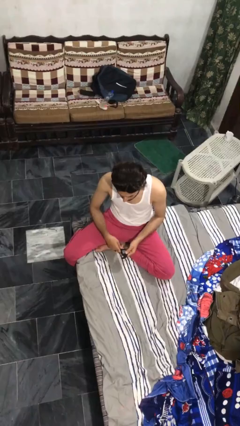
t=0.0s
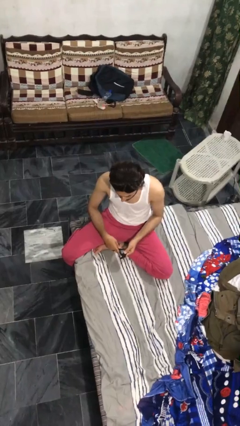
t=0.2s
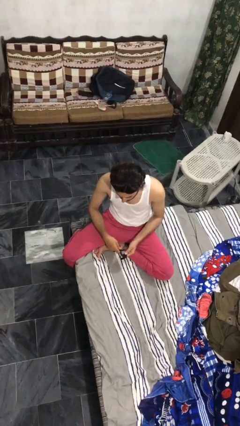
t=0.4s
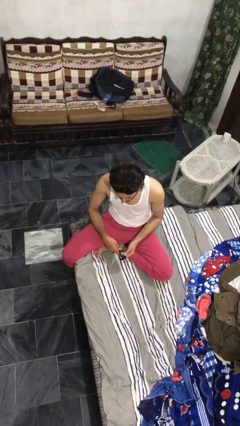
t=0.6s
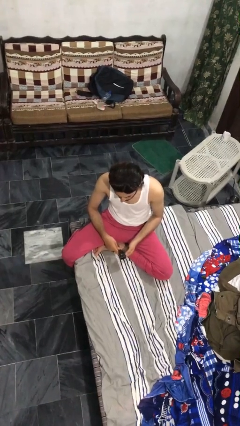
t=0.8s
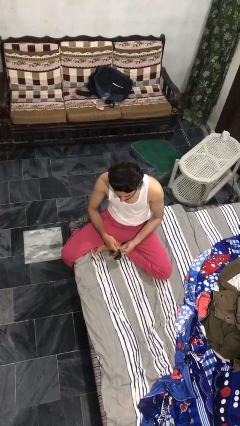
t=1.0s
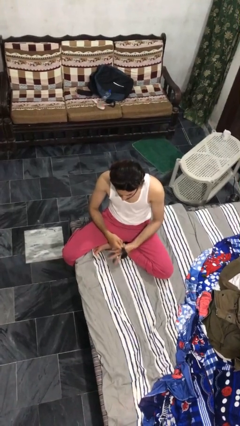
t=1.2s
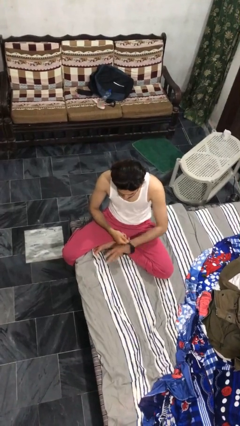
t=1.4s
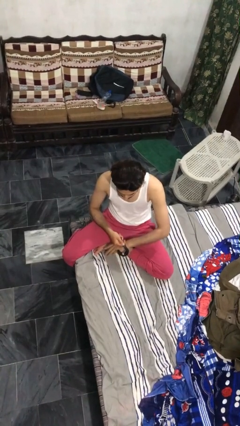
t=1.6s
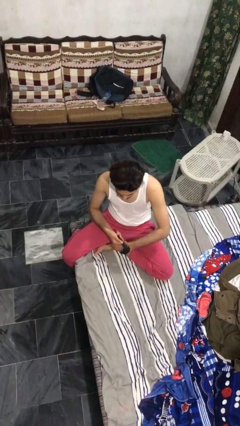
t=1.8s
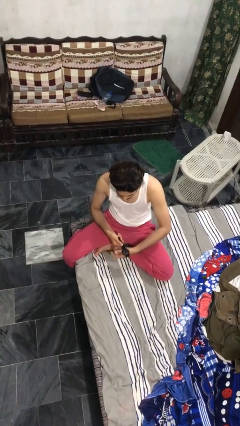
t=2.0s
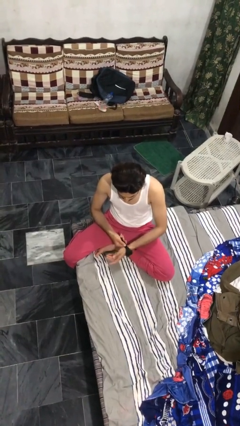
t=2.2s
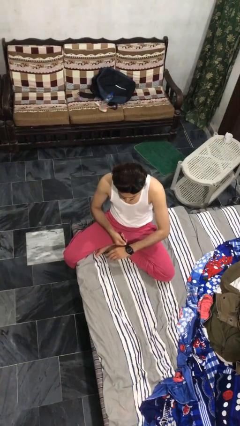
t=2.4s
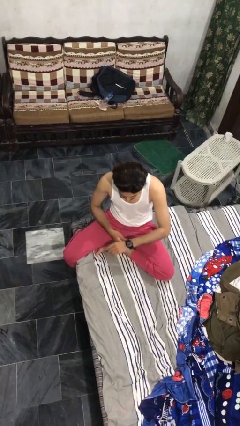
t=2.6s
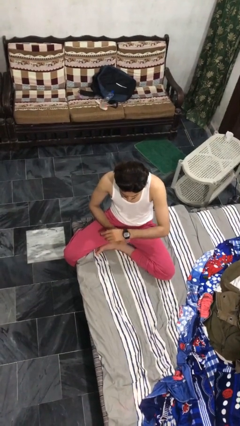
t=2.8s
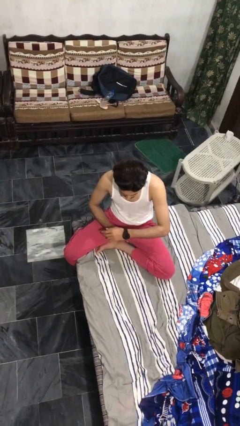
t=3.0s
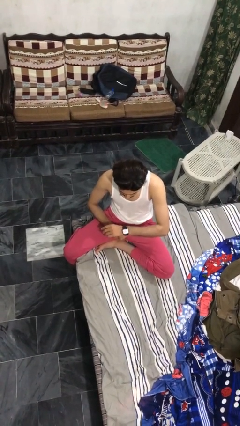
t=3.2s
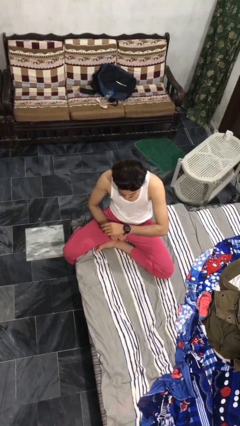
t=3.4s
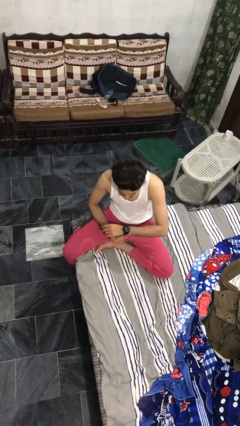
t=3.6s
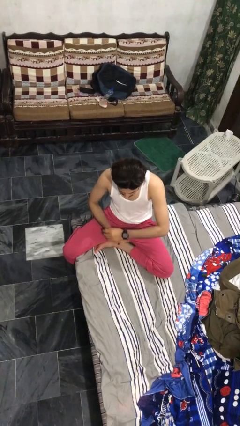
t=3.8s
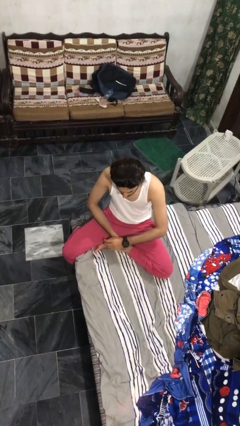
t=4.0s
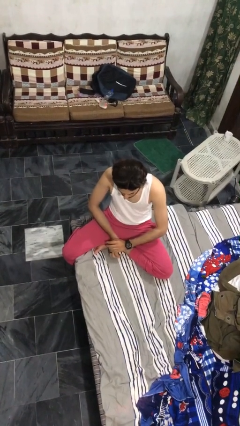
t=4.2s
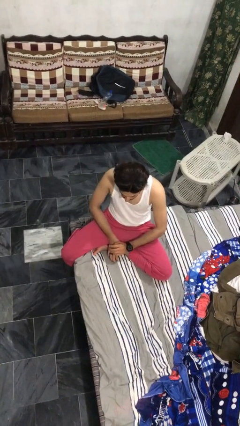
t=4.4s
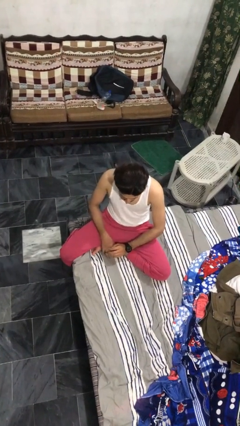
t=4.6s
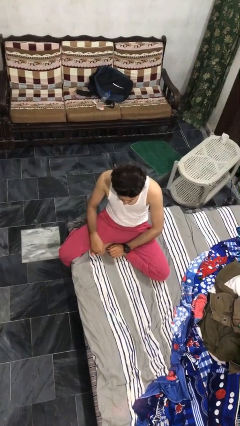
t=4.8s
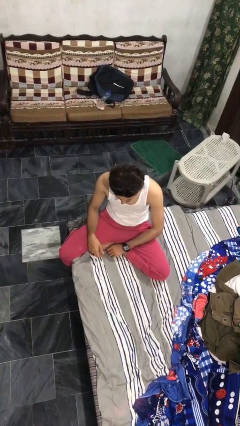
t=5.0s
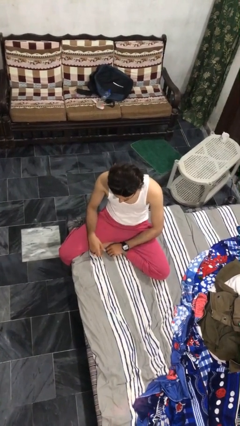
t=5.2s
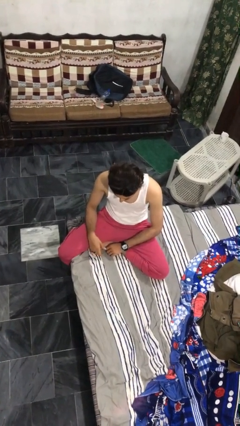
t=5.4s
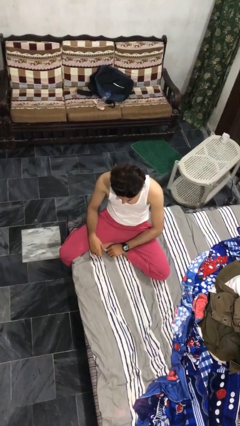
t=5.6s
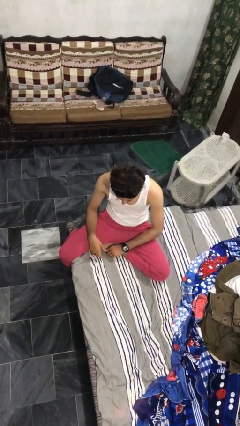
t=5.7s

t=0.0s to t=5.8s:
person puts on wristwatch

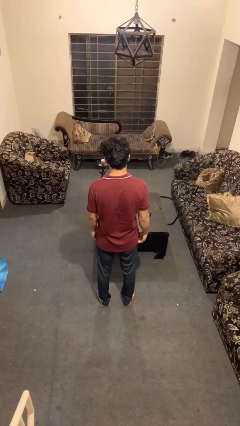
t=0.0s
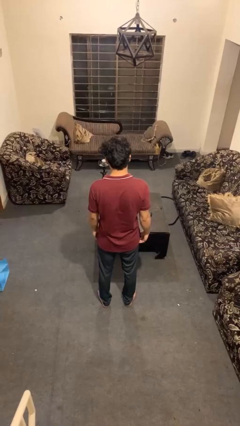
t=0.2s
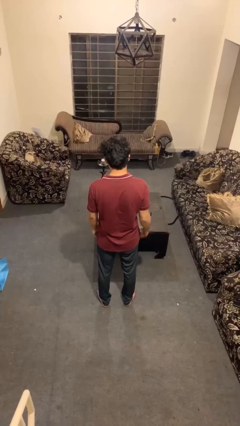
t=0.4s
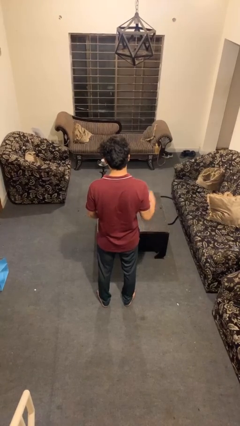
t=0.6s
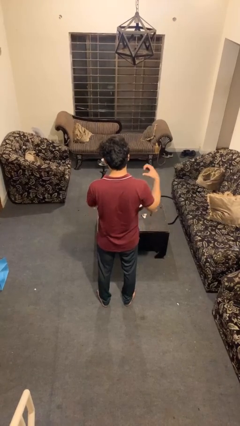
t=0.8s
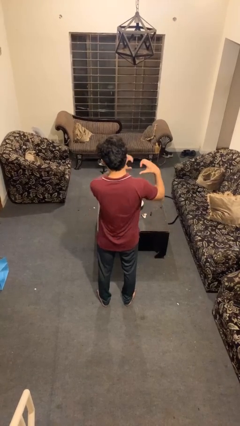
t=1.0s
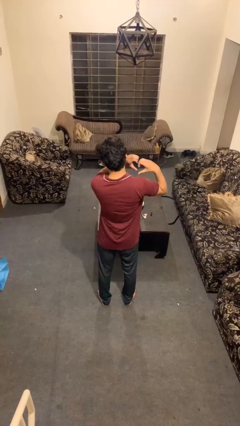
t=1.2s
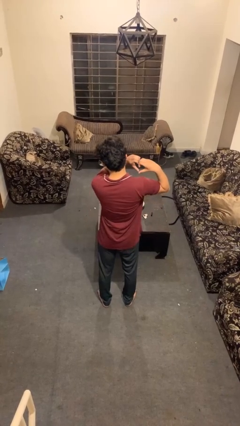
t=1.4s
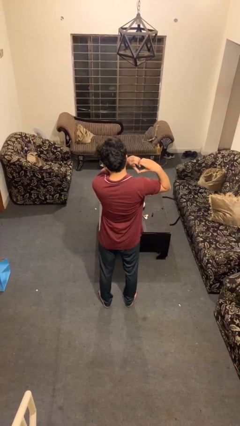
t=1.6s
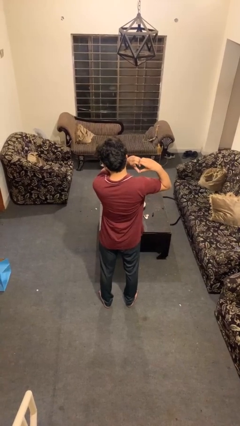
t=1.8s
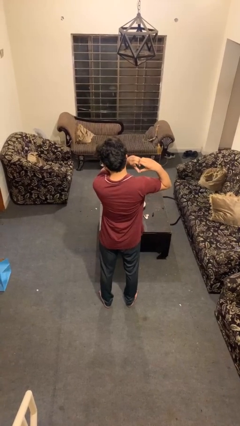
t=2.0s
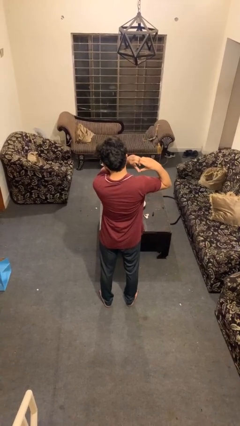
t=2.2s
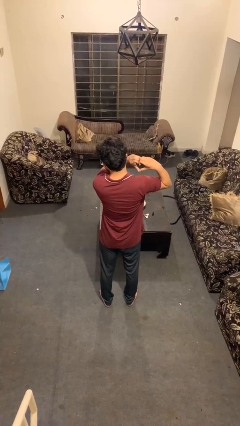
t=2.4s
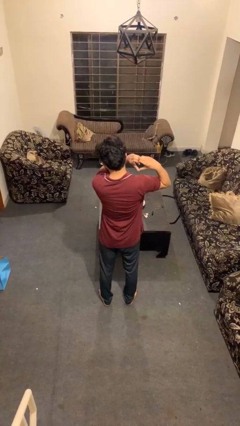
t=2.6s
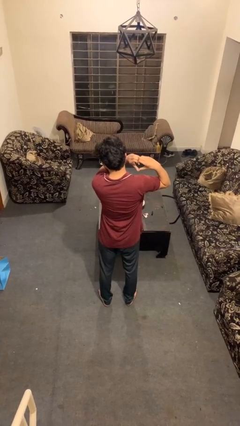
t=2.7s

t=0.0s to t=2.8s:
person gestures heart

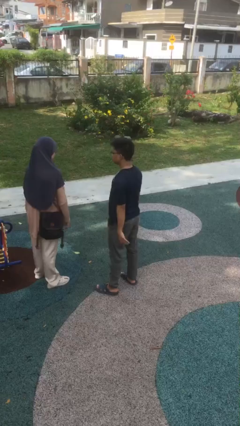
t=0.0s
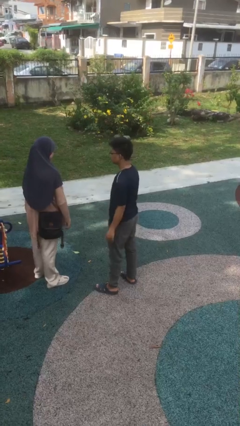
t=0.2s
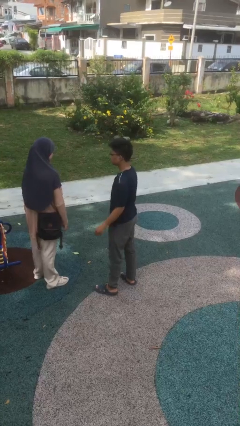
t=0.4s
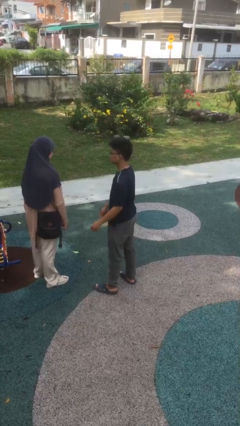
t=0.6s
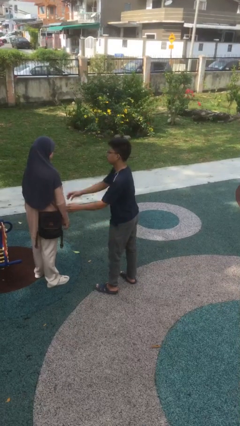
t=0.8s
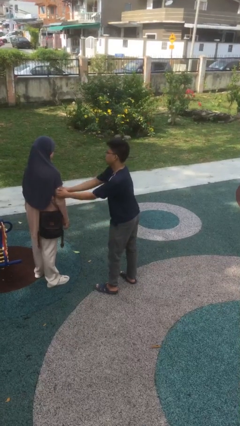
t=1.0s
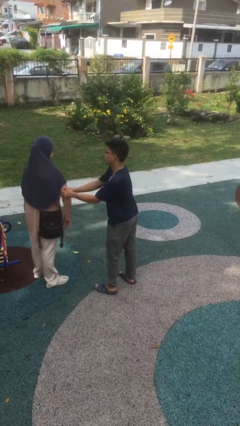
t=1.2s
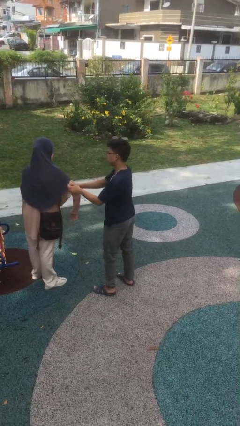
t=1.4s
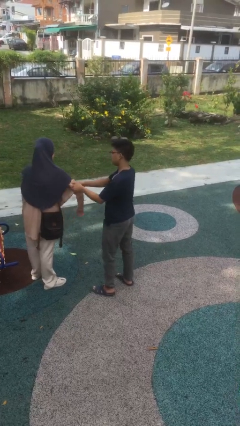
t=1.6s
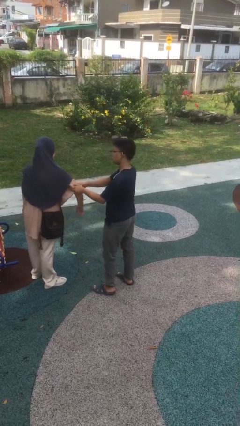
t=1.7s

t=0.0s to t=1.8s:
person grabs person by bicep

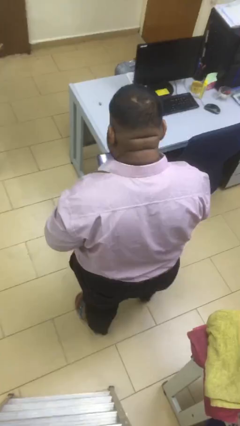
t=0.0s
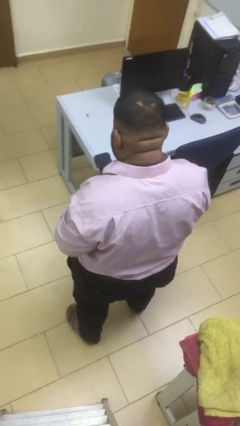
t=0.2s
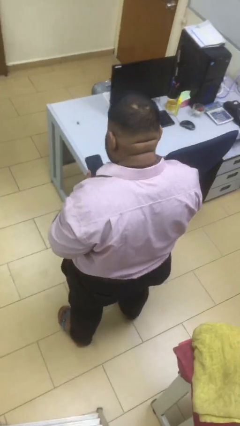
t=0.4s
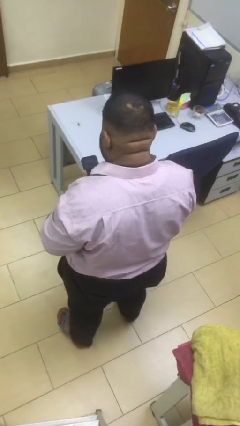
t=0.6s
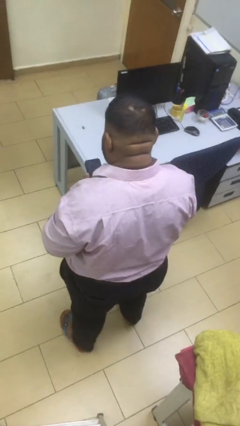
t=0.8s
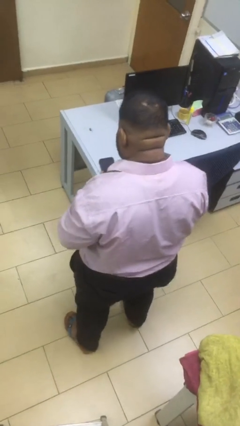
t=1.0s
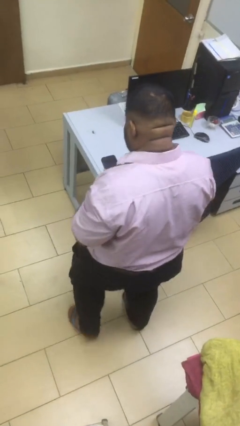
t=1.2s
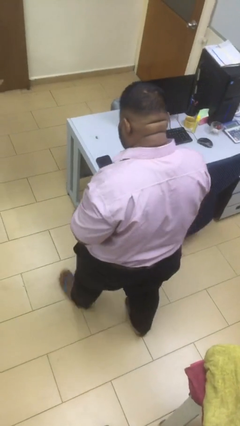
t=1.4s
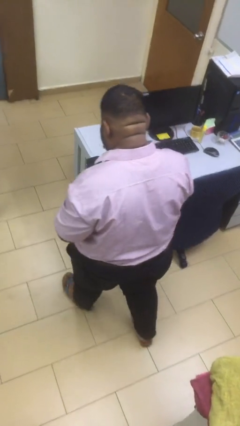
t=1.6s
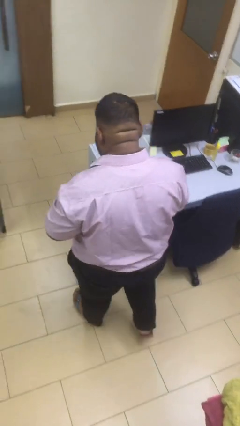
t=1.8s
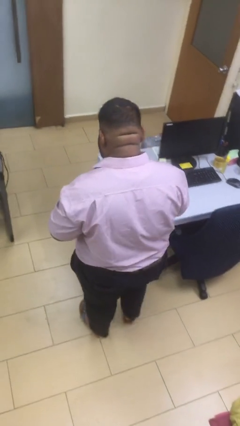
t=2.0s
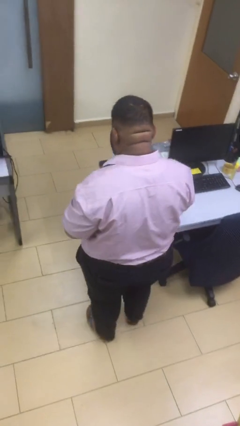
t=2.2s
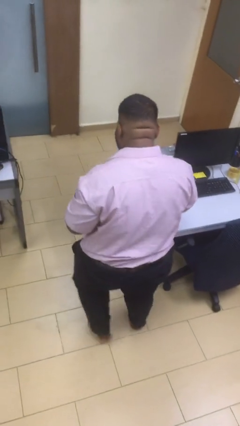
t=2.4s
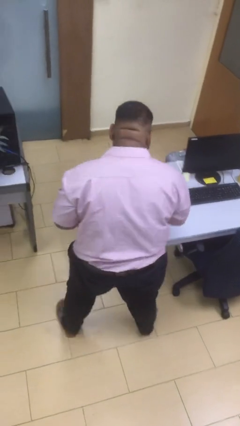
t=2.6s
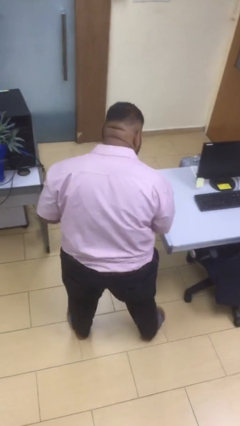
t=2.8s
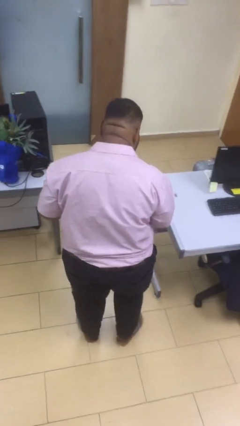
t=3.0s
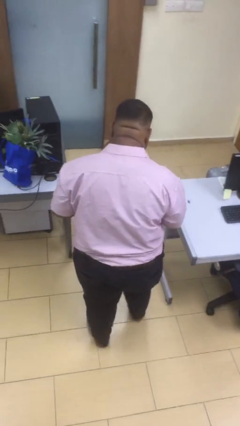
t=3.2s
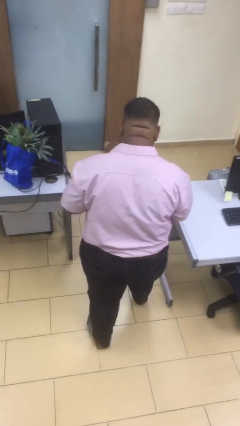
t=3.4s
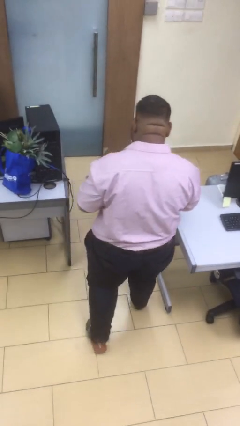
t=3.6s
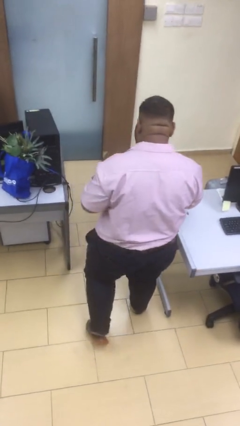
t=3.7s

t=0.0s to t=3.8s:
person bumps into table

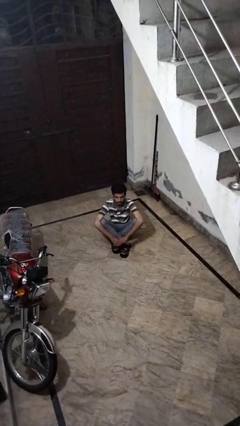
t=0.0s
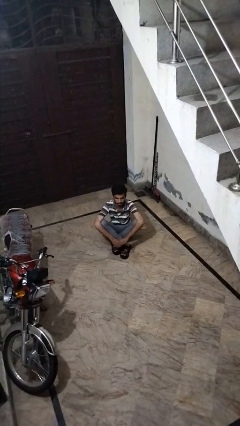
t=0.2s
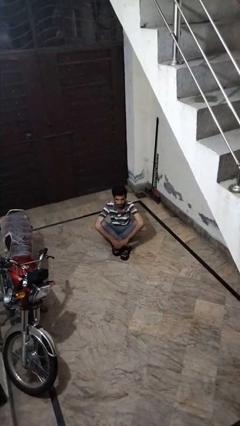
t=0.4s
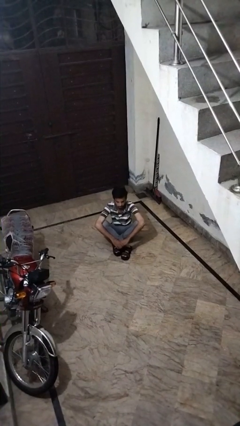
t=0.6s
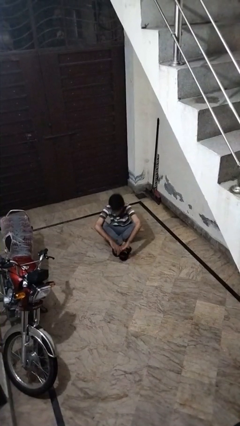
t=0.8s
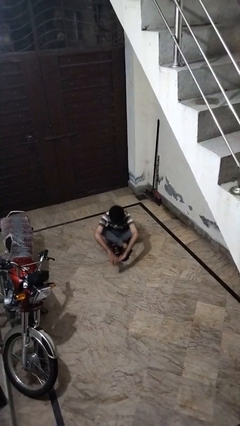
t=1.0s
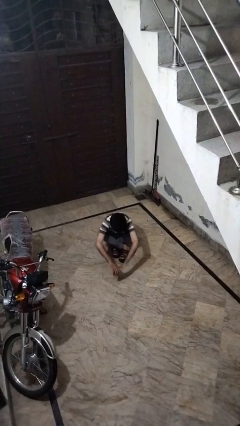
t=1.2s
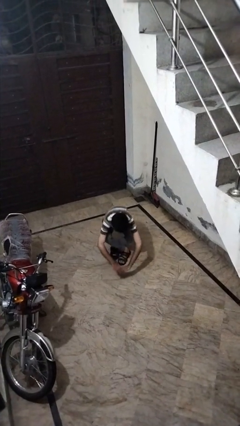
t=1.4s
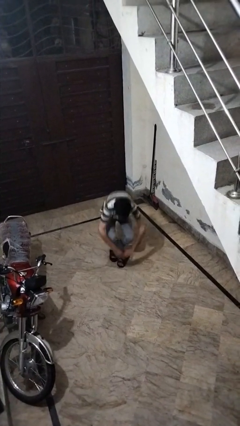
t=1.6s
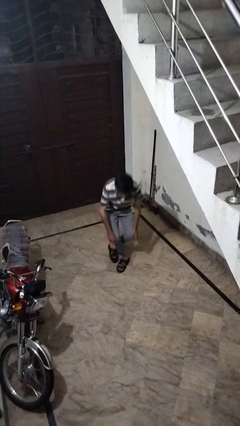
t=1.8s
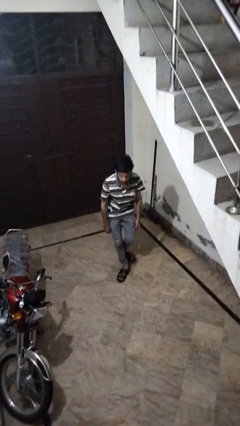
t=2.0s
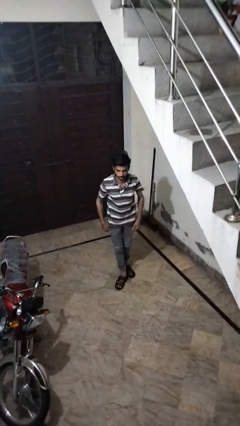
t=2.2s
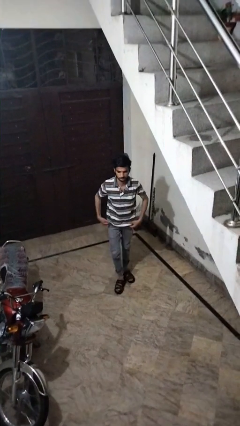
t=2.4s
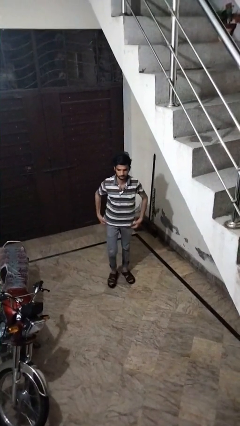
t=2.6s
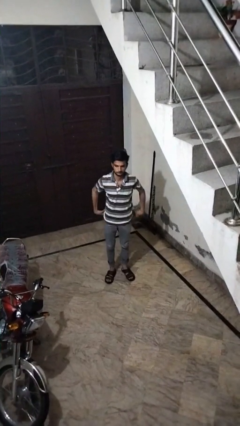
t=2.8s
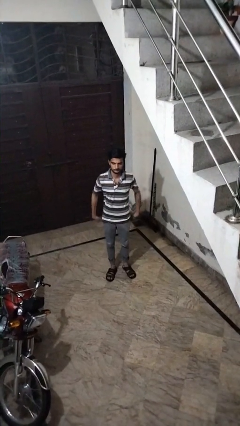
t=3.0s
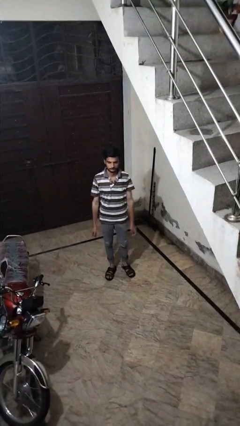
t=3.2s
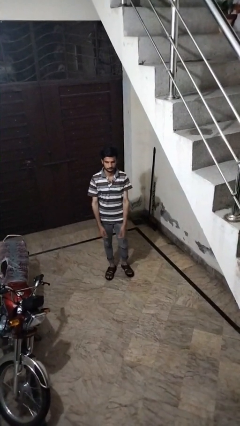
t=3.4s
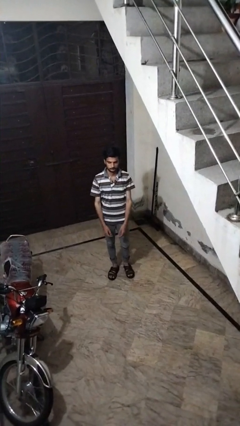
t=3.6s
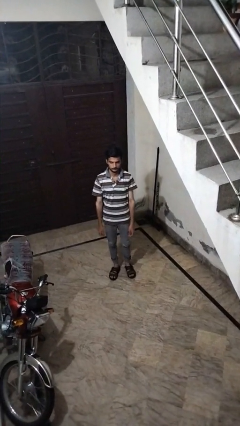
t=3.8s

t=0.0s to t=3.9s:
person stands up from floor
